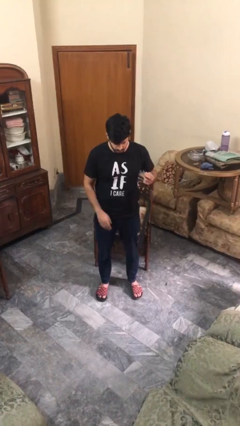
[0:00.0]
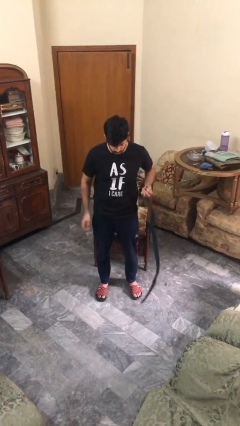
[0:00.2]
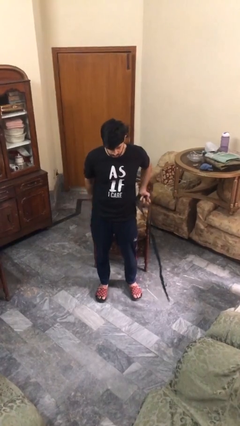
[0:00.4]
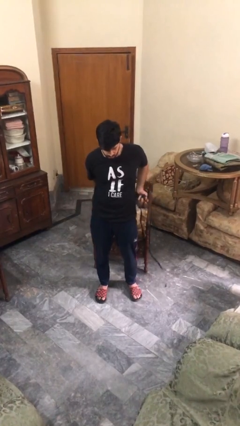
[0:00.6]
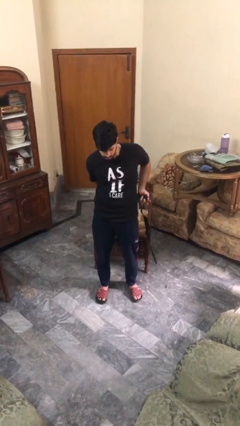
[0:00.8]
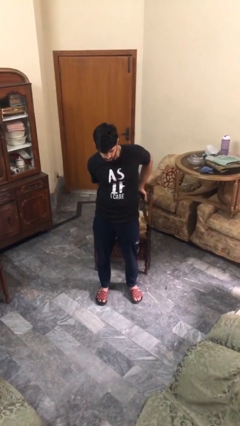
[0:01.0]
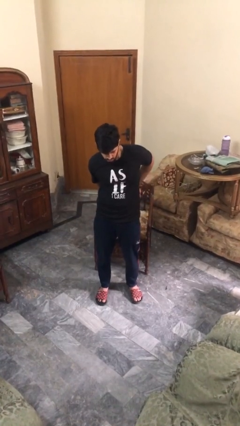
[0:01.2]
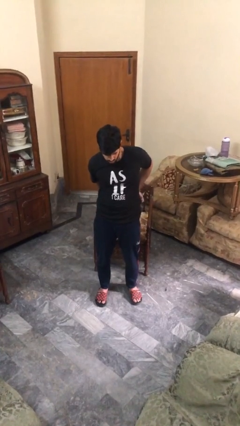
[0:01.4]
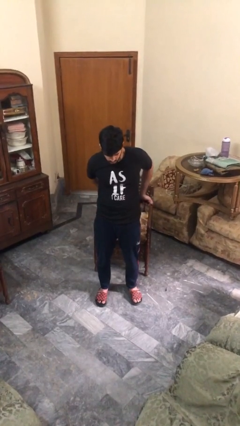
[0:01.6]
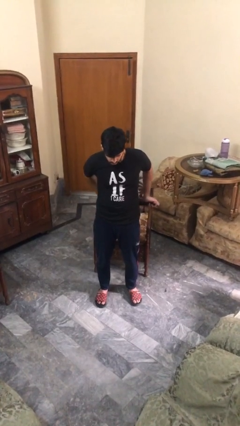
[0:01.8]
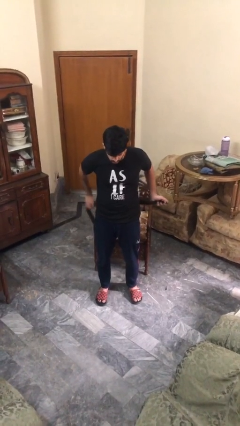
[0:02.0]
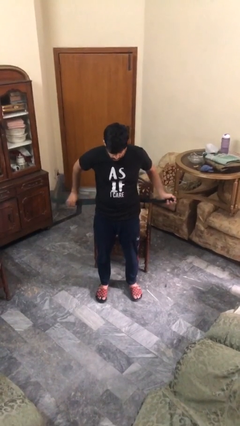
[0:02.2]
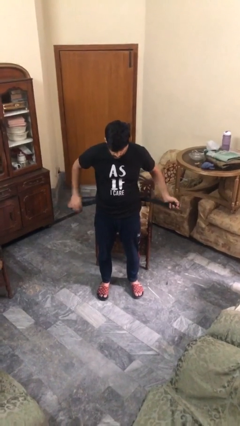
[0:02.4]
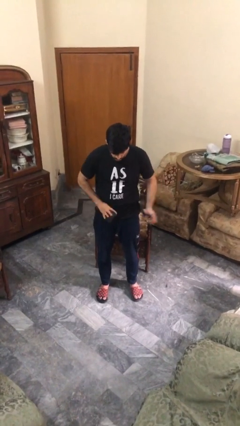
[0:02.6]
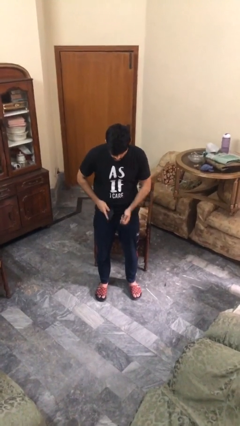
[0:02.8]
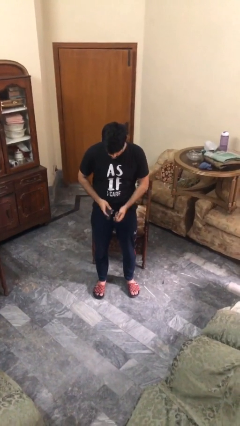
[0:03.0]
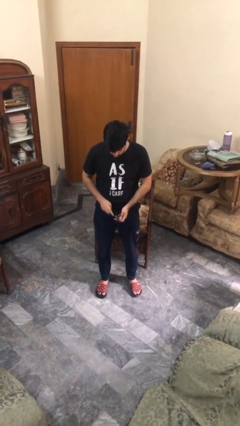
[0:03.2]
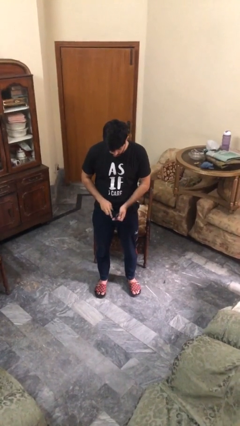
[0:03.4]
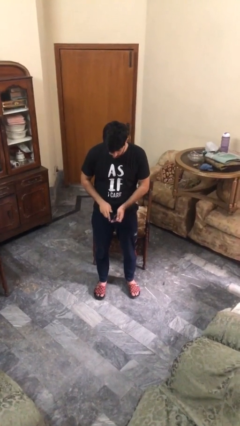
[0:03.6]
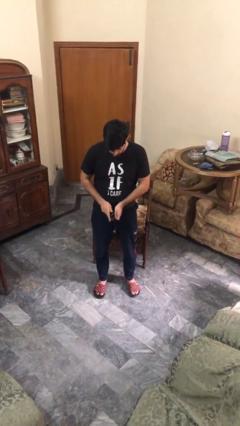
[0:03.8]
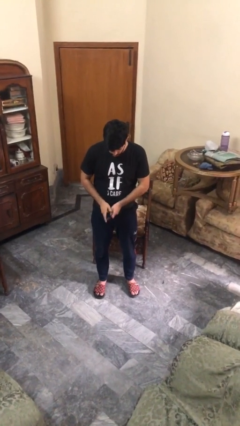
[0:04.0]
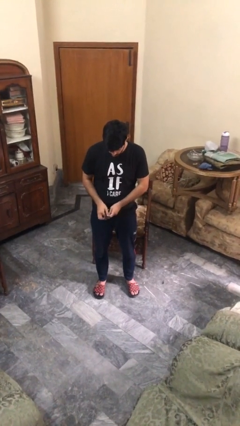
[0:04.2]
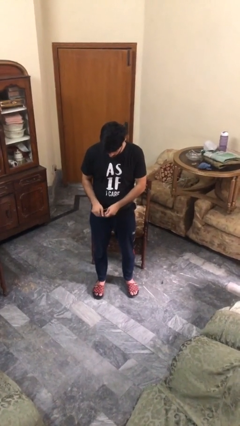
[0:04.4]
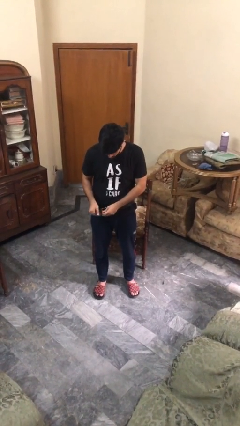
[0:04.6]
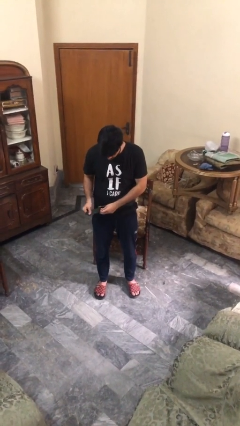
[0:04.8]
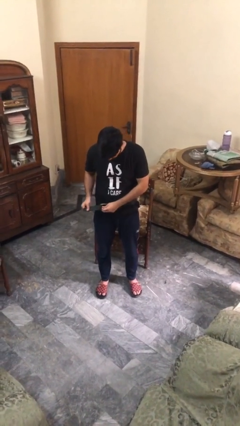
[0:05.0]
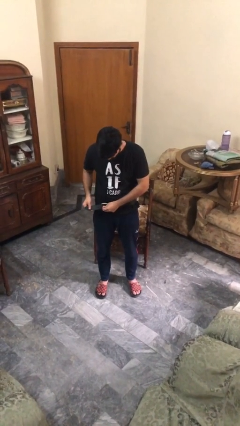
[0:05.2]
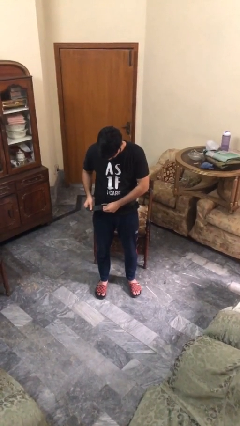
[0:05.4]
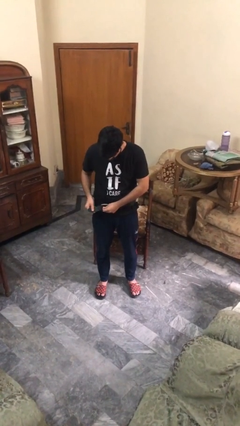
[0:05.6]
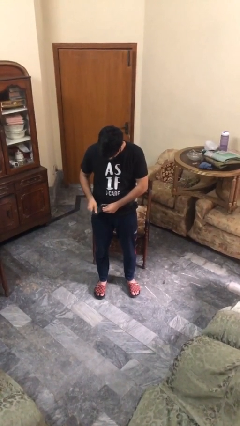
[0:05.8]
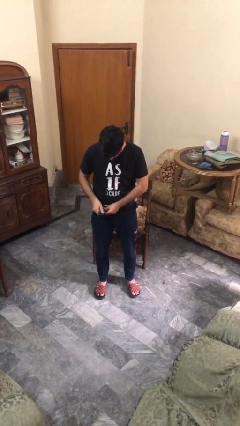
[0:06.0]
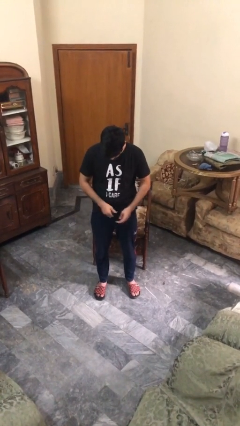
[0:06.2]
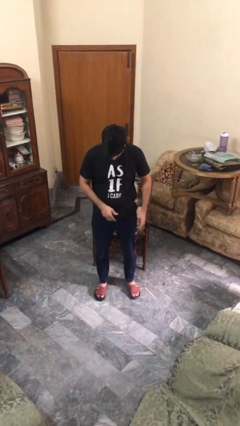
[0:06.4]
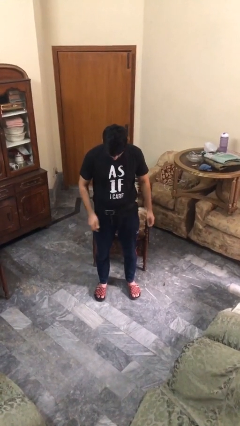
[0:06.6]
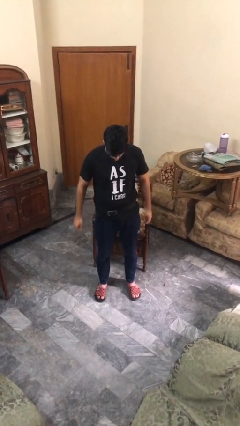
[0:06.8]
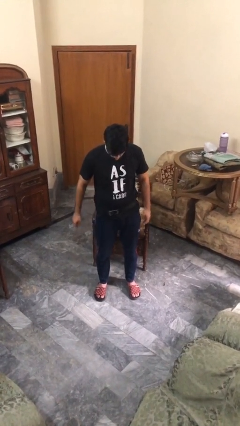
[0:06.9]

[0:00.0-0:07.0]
person puts on belt

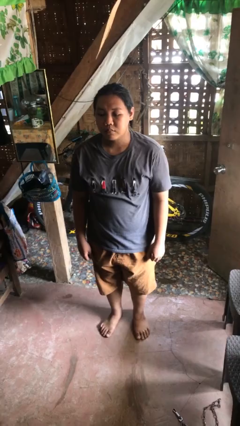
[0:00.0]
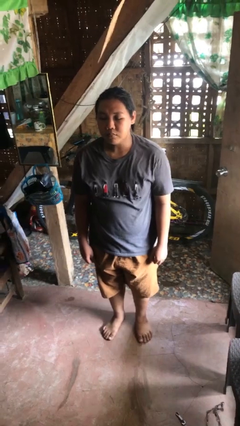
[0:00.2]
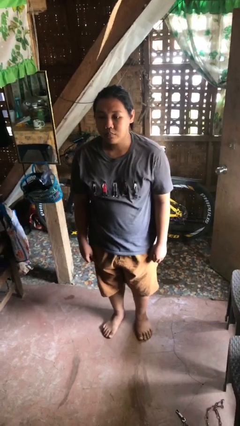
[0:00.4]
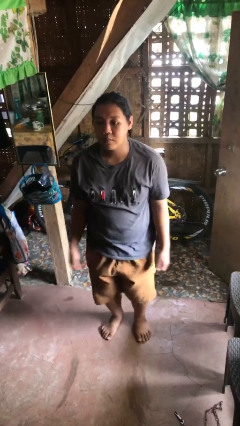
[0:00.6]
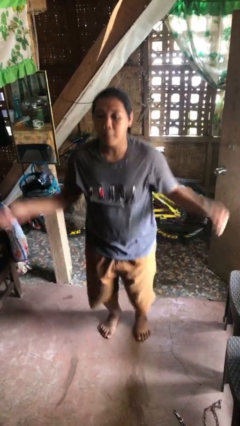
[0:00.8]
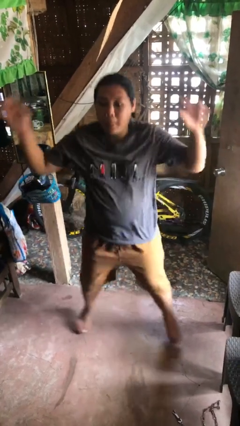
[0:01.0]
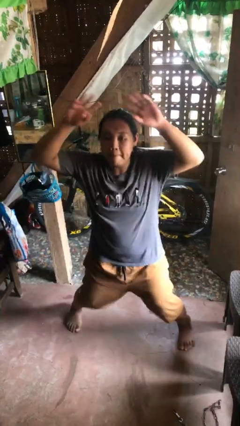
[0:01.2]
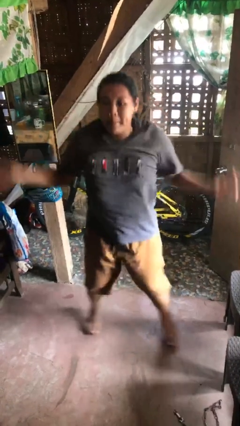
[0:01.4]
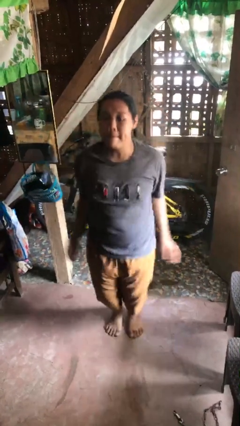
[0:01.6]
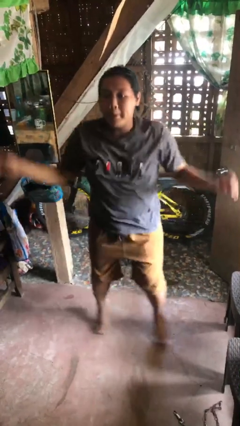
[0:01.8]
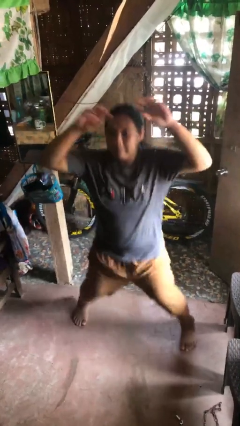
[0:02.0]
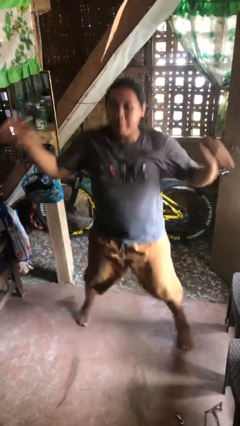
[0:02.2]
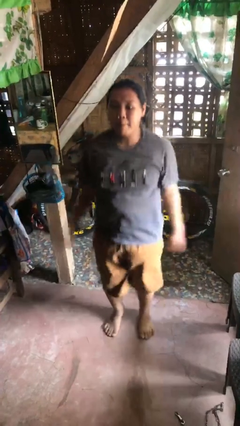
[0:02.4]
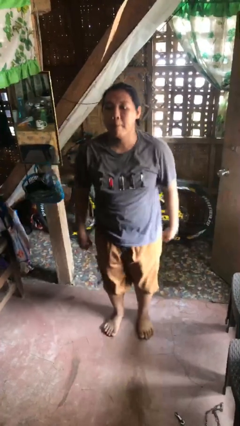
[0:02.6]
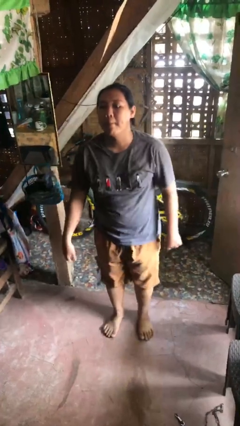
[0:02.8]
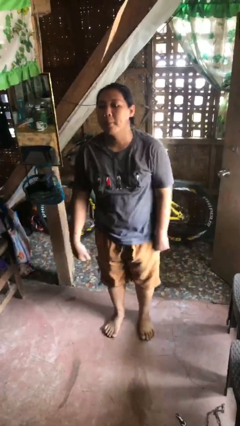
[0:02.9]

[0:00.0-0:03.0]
person exercises with jumping jacks

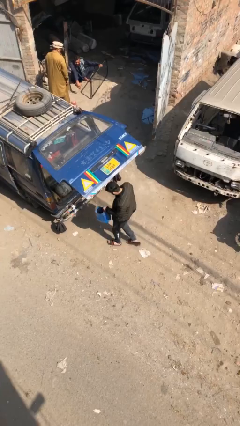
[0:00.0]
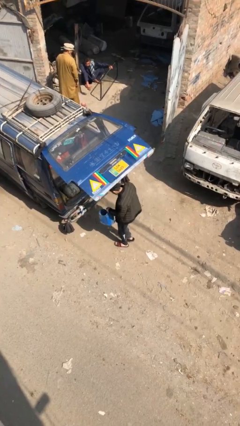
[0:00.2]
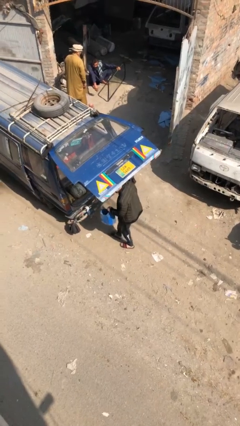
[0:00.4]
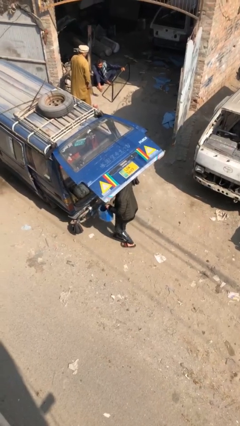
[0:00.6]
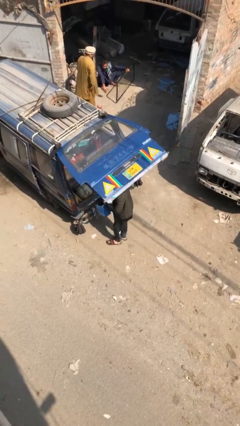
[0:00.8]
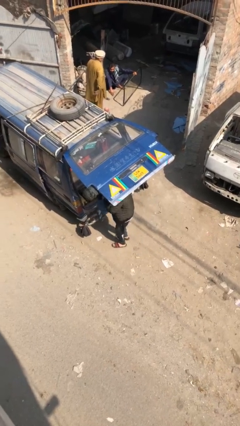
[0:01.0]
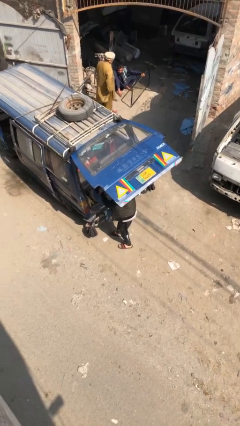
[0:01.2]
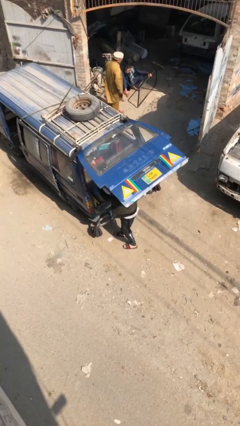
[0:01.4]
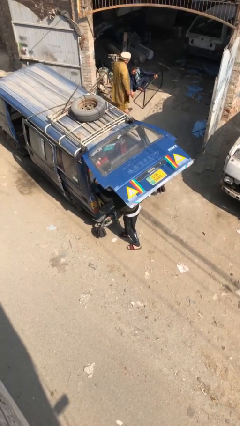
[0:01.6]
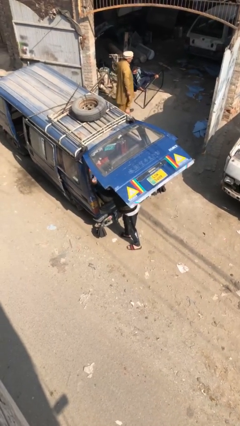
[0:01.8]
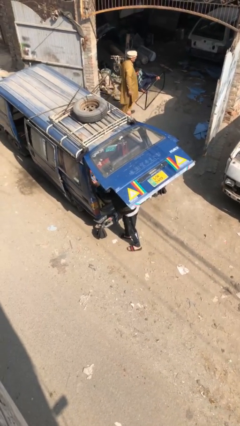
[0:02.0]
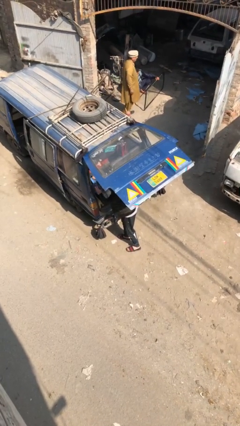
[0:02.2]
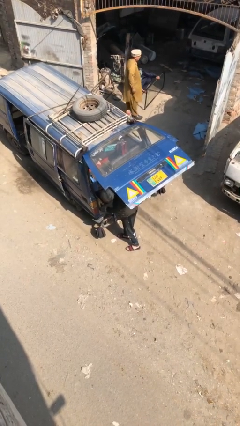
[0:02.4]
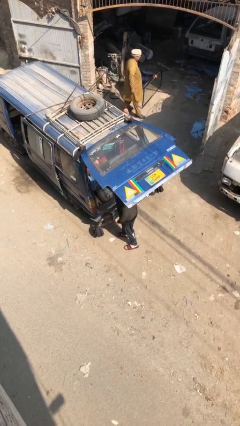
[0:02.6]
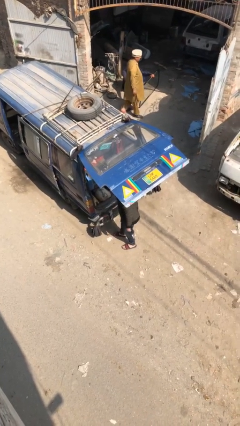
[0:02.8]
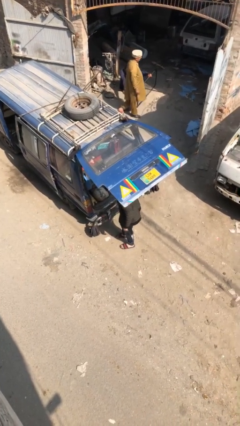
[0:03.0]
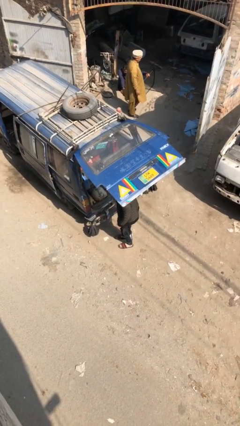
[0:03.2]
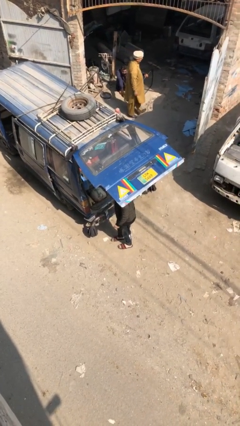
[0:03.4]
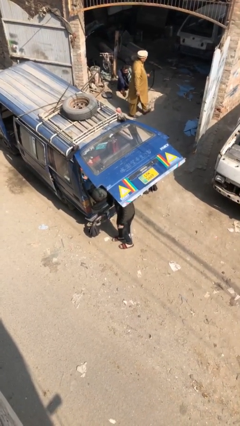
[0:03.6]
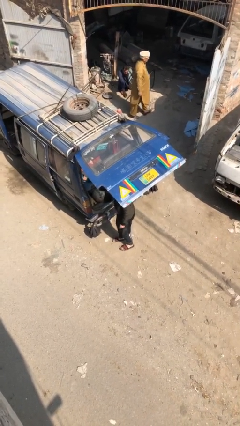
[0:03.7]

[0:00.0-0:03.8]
person loads car

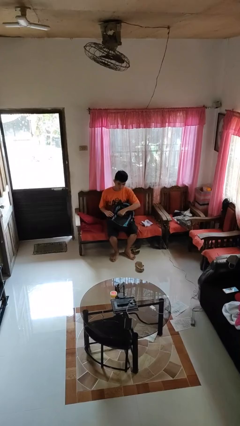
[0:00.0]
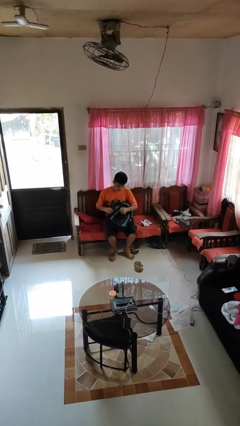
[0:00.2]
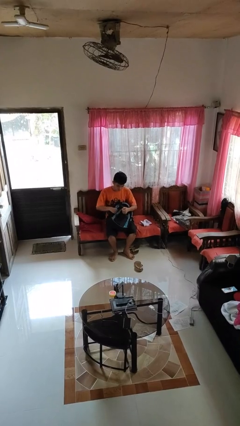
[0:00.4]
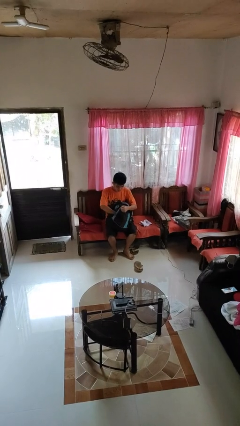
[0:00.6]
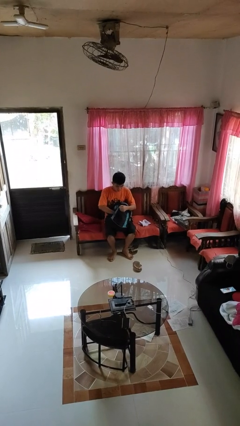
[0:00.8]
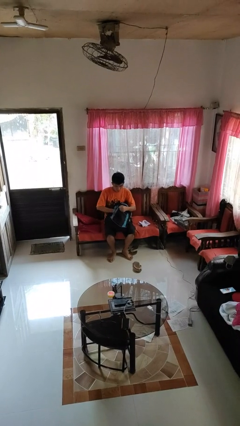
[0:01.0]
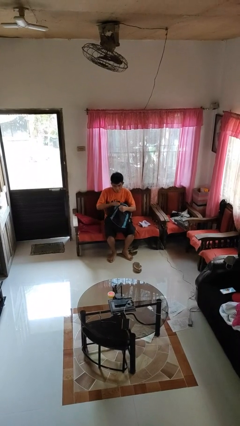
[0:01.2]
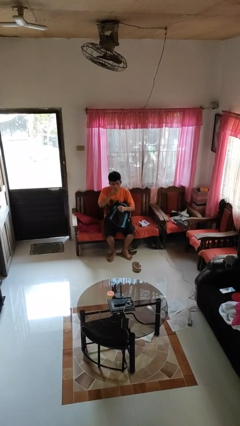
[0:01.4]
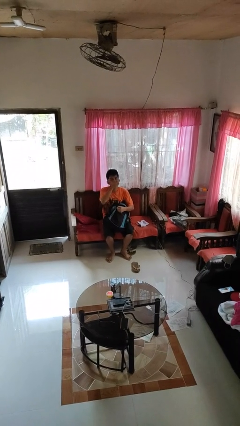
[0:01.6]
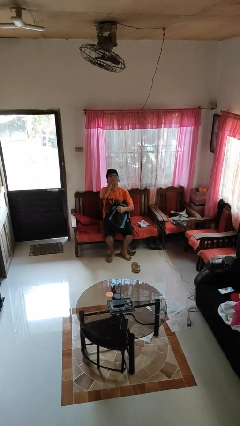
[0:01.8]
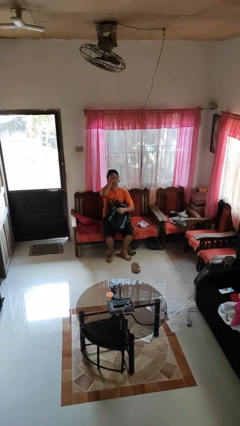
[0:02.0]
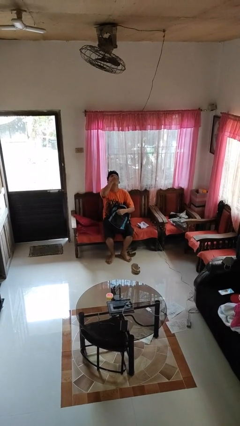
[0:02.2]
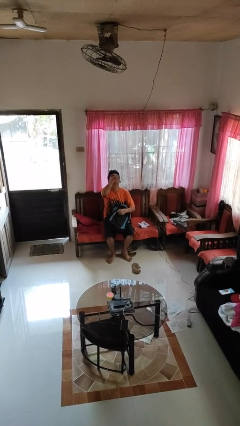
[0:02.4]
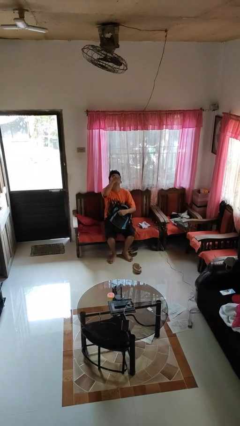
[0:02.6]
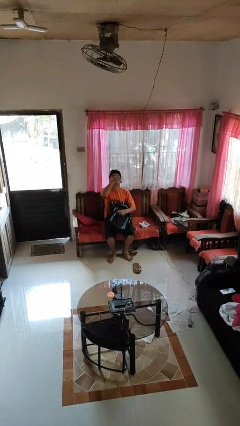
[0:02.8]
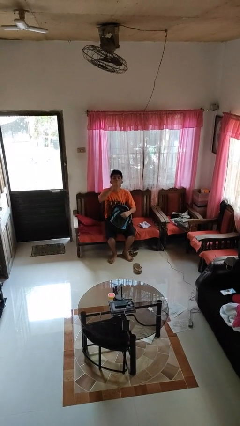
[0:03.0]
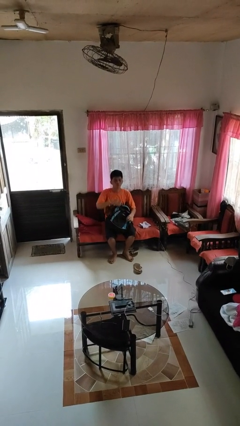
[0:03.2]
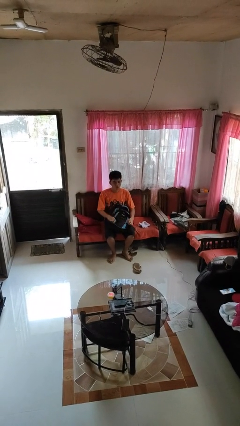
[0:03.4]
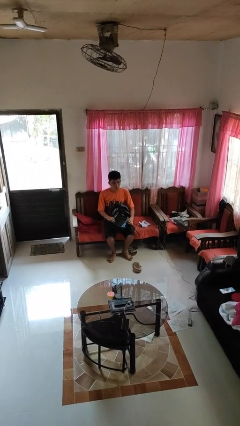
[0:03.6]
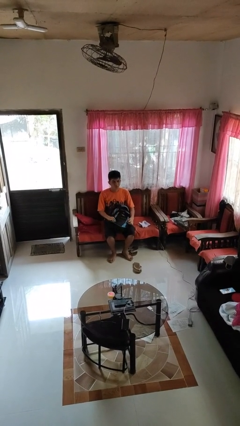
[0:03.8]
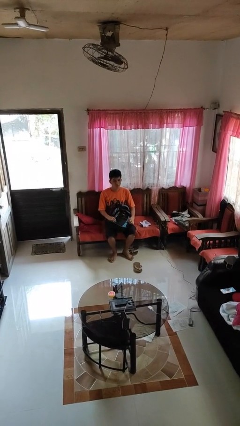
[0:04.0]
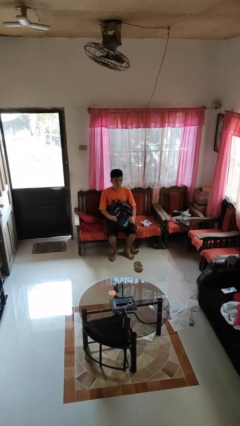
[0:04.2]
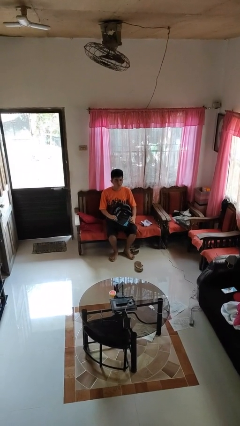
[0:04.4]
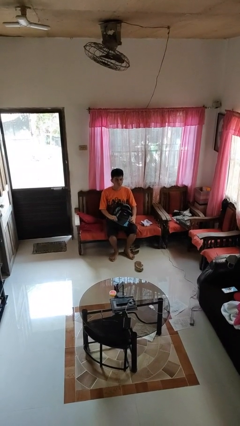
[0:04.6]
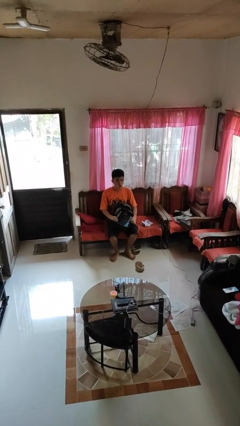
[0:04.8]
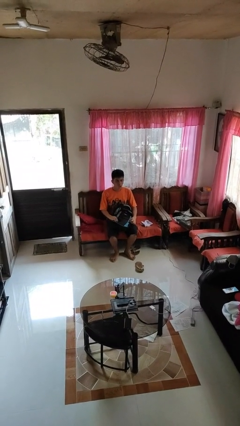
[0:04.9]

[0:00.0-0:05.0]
person eats snack from bag
